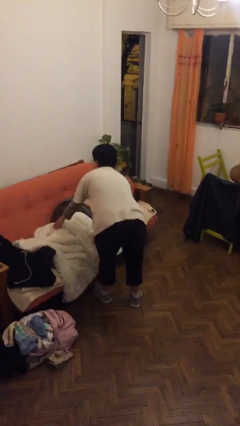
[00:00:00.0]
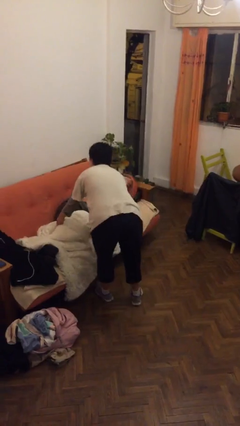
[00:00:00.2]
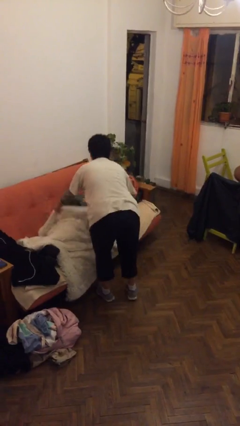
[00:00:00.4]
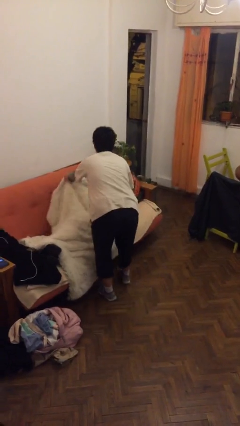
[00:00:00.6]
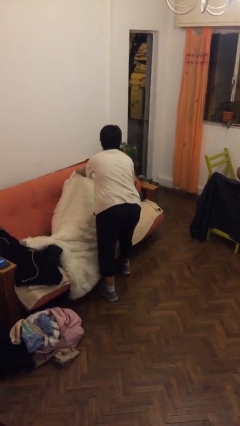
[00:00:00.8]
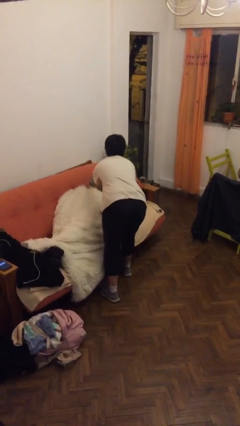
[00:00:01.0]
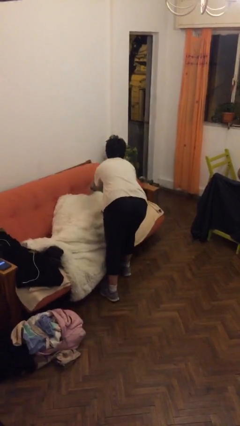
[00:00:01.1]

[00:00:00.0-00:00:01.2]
person covers friend with blanket

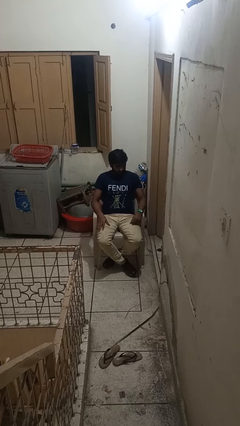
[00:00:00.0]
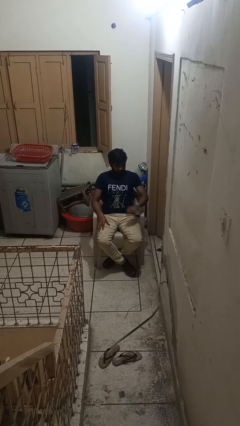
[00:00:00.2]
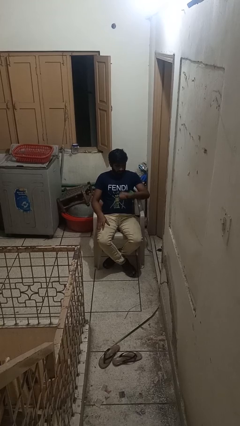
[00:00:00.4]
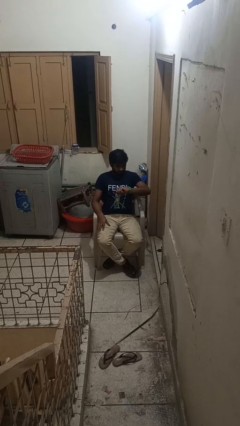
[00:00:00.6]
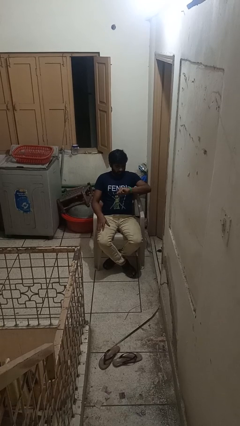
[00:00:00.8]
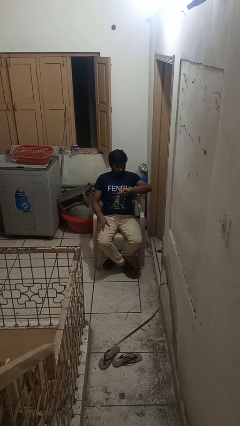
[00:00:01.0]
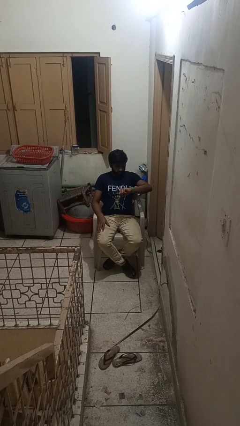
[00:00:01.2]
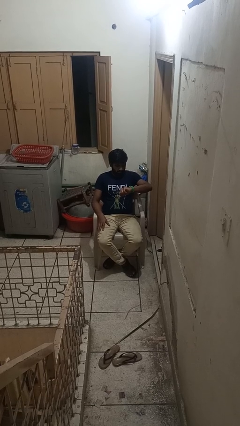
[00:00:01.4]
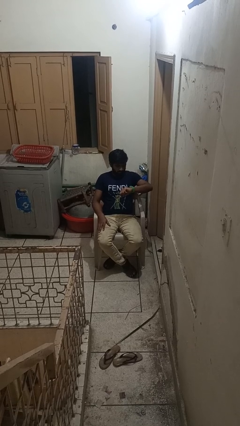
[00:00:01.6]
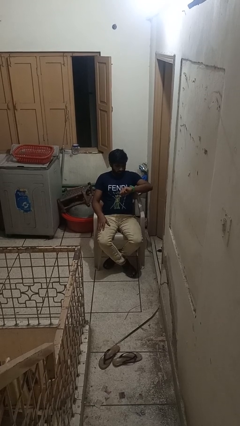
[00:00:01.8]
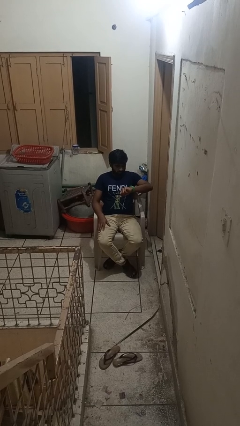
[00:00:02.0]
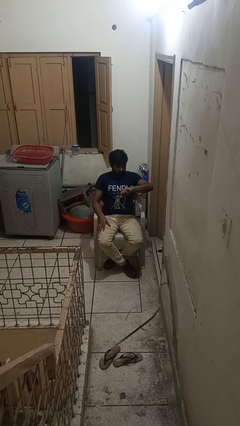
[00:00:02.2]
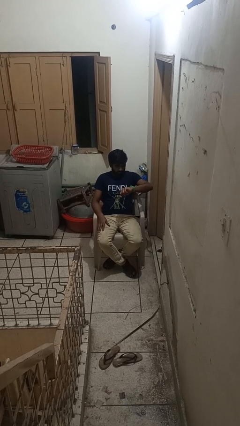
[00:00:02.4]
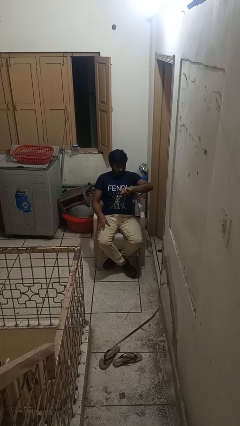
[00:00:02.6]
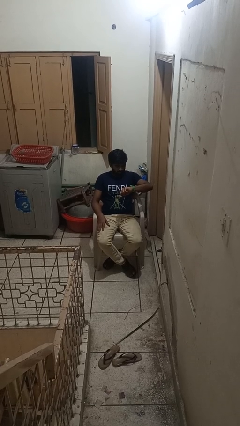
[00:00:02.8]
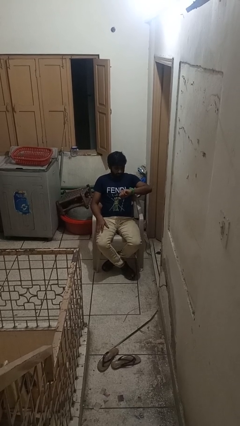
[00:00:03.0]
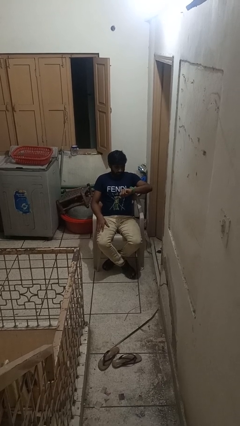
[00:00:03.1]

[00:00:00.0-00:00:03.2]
person looks at wristwatch

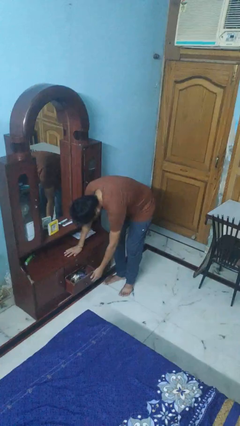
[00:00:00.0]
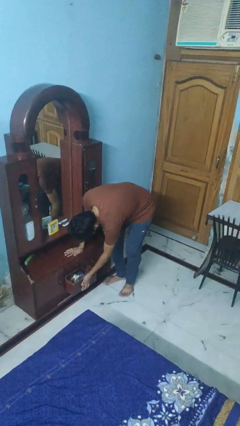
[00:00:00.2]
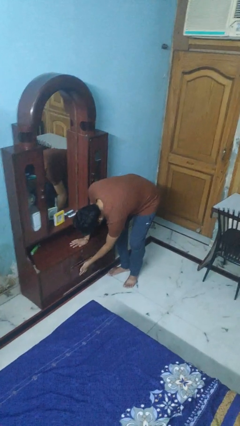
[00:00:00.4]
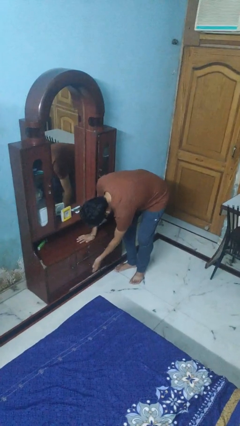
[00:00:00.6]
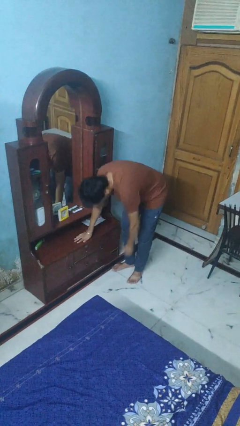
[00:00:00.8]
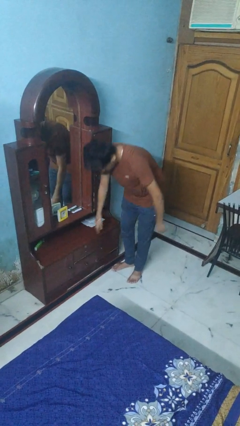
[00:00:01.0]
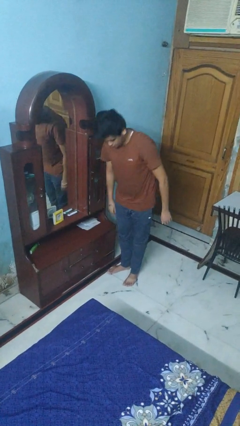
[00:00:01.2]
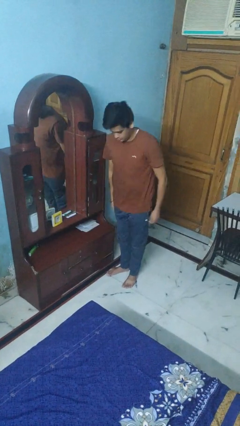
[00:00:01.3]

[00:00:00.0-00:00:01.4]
person closes dresser drawer

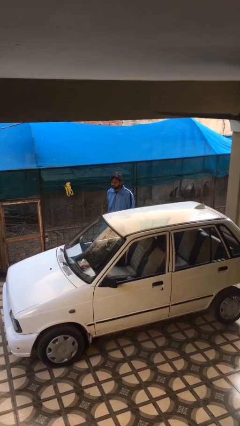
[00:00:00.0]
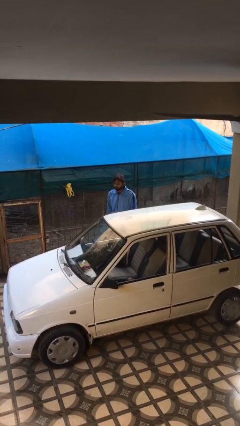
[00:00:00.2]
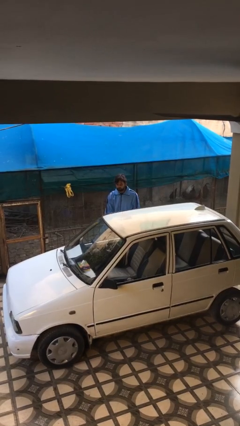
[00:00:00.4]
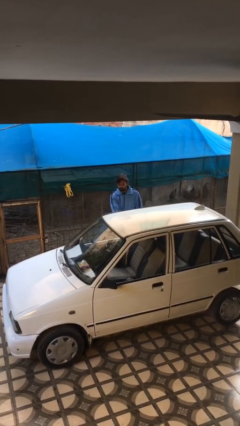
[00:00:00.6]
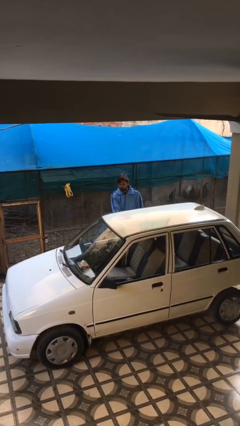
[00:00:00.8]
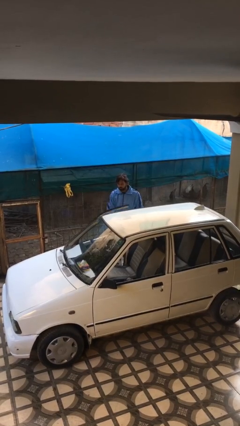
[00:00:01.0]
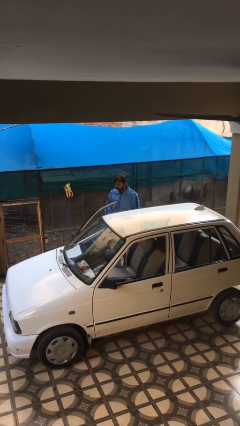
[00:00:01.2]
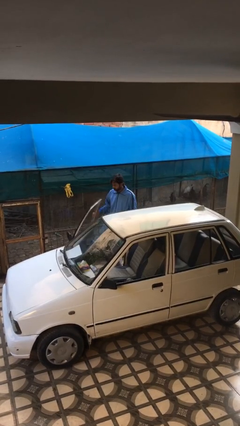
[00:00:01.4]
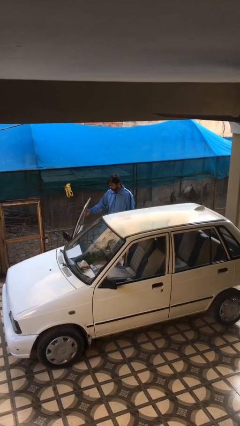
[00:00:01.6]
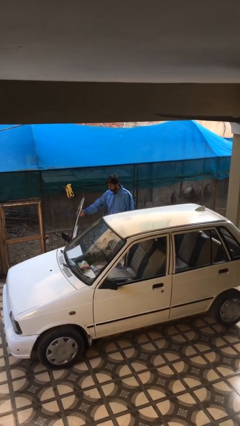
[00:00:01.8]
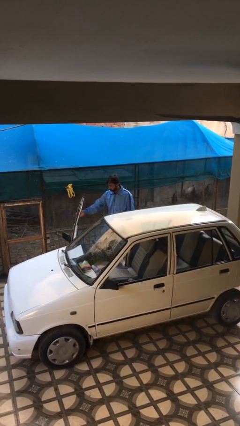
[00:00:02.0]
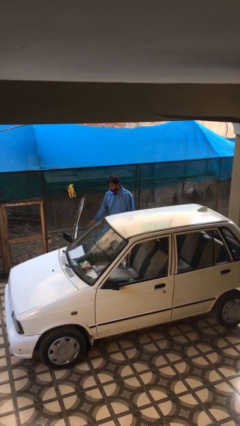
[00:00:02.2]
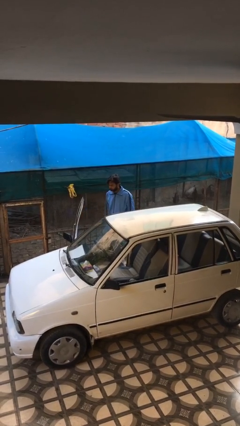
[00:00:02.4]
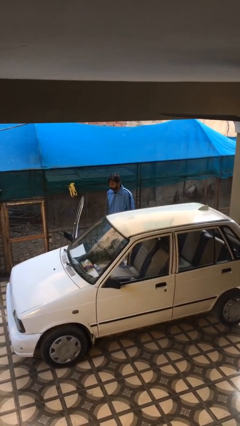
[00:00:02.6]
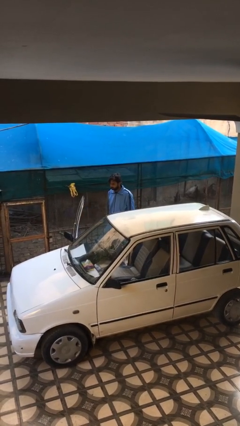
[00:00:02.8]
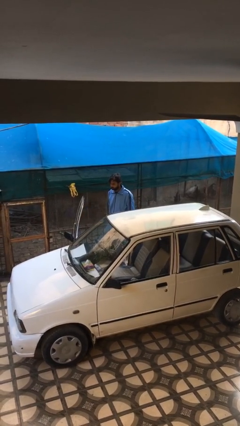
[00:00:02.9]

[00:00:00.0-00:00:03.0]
person opens car door

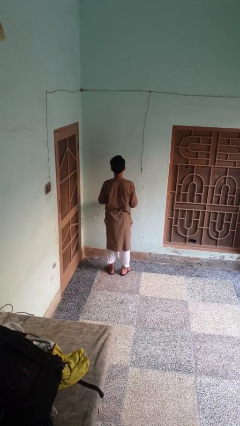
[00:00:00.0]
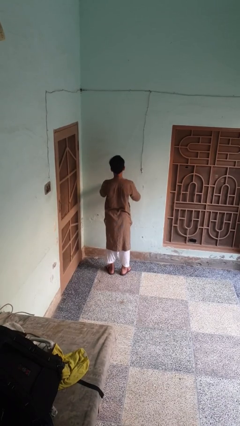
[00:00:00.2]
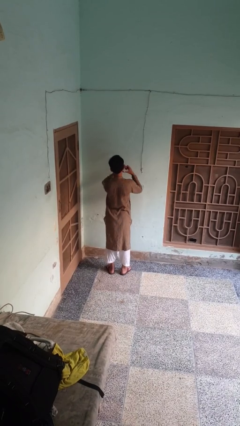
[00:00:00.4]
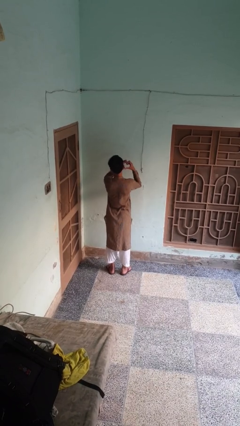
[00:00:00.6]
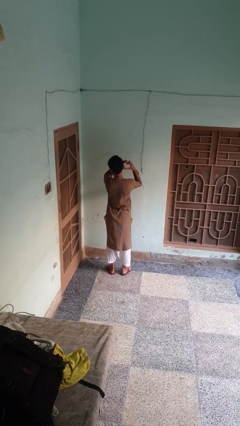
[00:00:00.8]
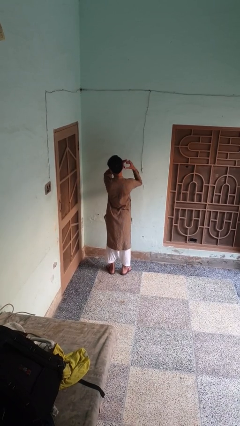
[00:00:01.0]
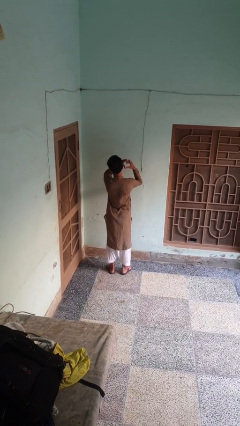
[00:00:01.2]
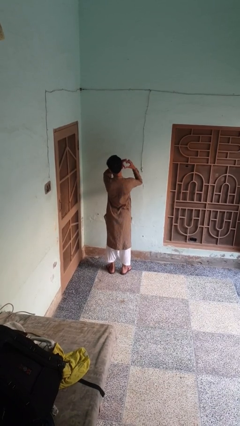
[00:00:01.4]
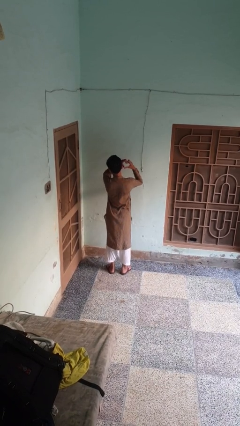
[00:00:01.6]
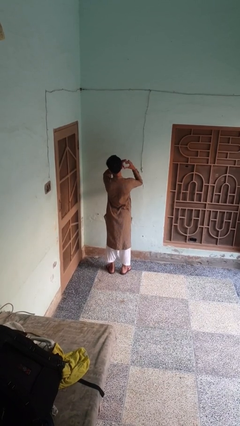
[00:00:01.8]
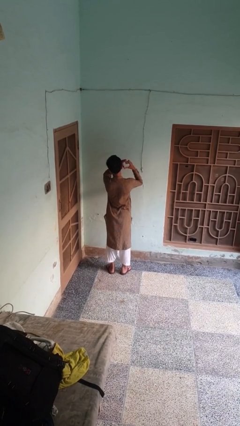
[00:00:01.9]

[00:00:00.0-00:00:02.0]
person gestures heart

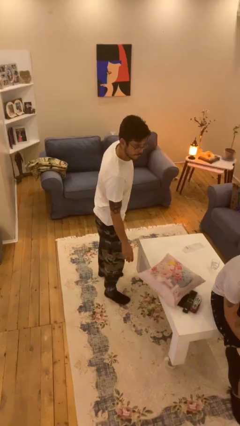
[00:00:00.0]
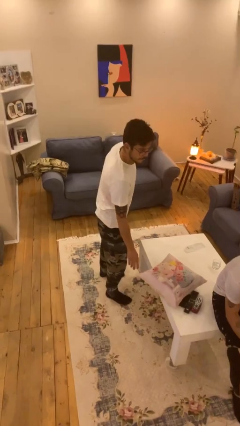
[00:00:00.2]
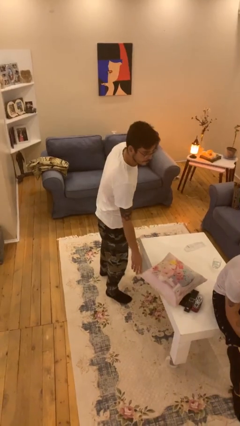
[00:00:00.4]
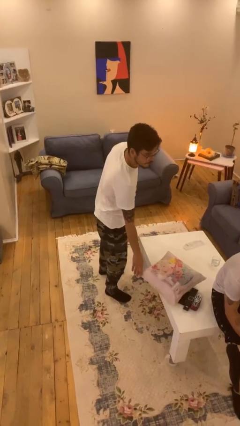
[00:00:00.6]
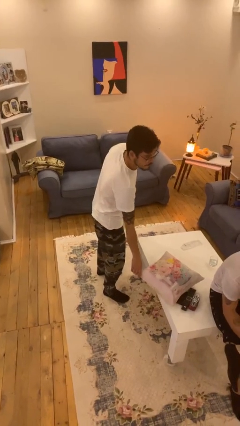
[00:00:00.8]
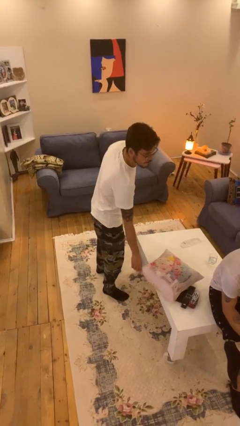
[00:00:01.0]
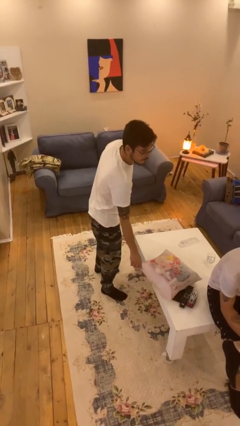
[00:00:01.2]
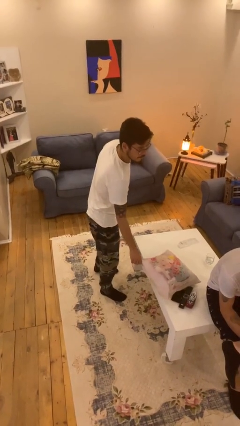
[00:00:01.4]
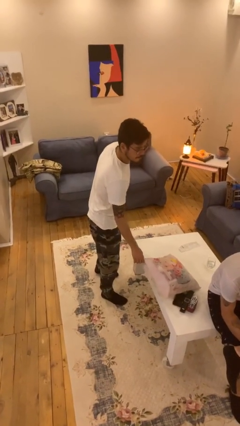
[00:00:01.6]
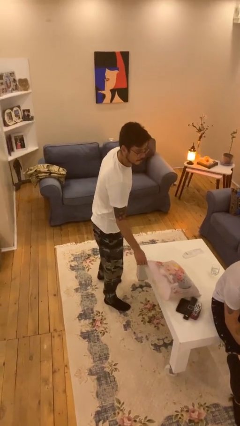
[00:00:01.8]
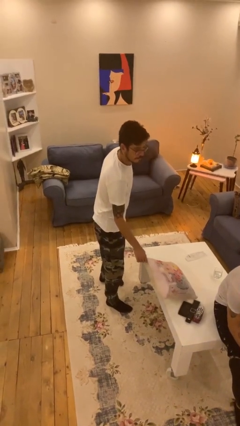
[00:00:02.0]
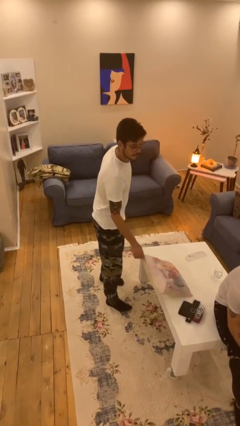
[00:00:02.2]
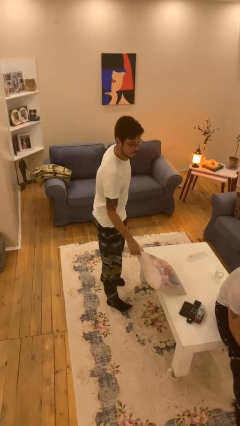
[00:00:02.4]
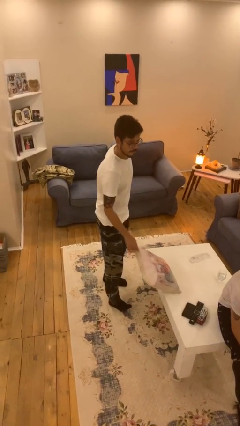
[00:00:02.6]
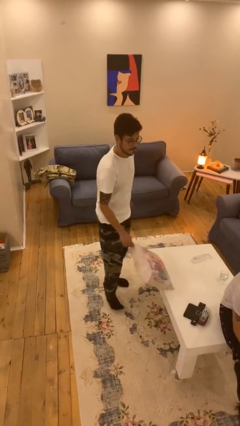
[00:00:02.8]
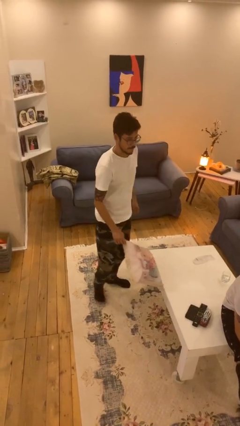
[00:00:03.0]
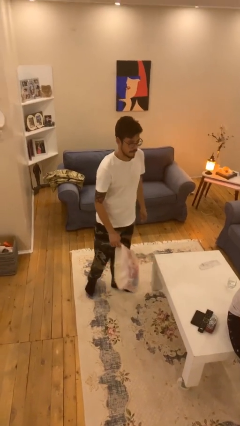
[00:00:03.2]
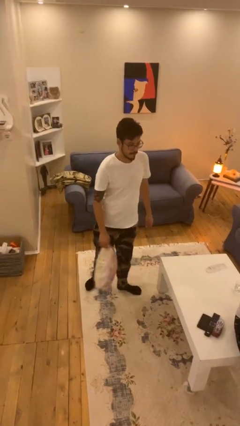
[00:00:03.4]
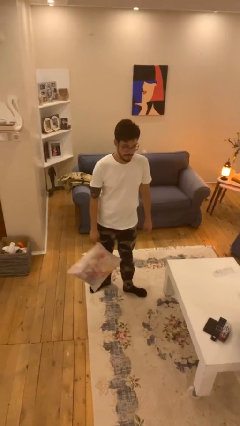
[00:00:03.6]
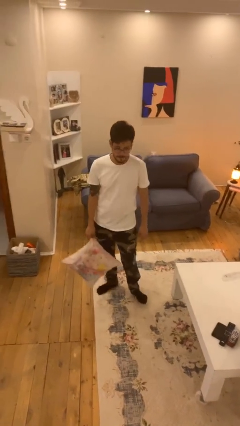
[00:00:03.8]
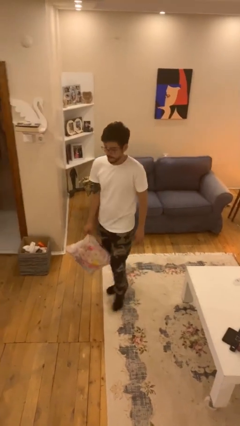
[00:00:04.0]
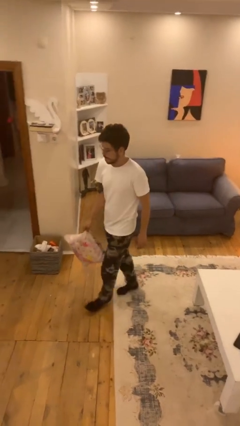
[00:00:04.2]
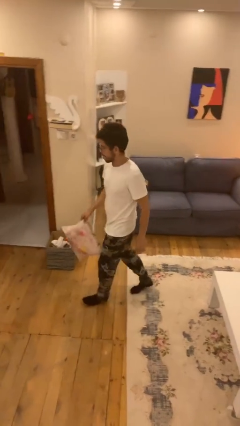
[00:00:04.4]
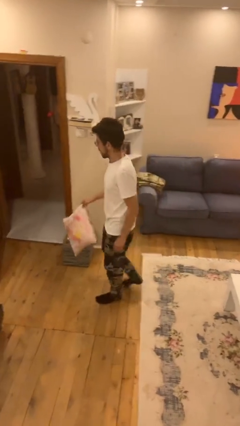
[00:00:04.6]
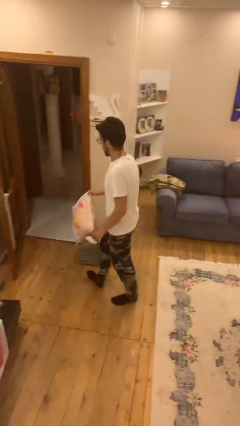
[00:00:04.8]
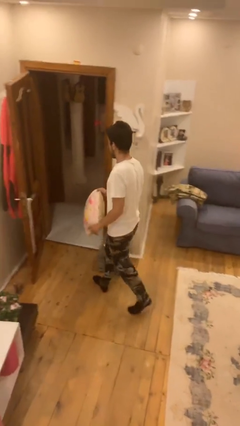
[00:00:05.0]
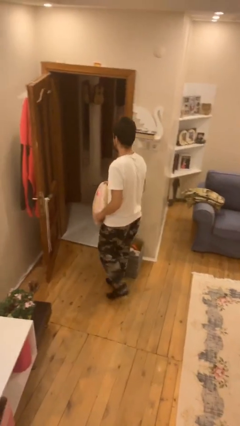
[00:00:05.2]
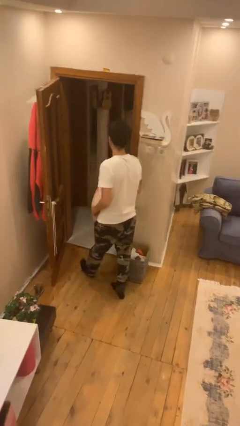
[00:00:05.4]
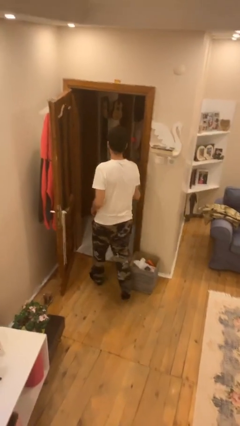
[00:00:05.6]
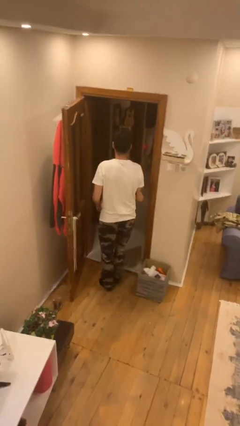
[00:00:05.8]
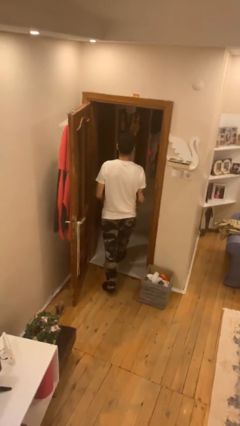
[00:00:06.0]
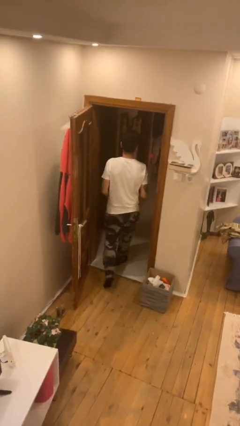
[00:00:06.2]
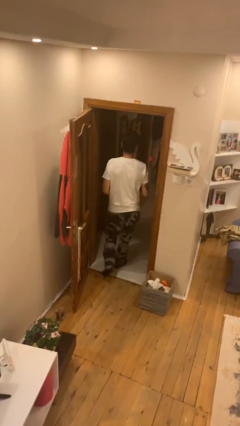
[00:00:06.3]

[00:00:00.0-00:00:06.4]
person steals object from person
